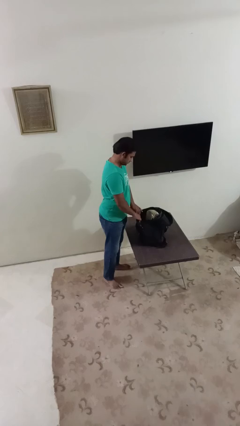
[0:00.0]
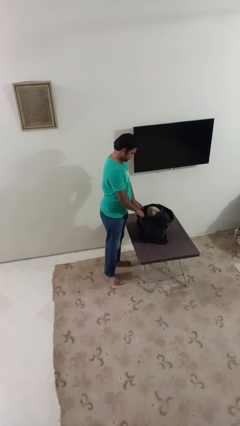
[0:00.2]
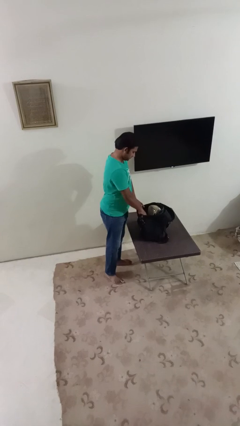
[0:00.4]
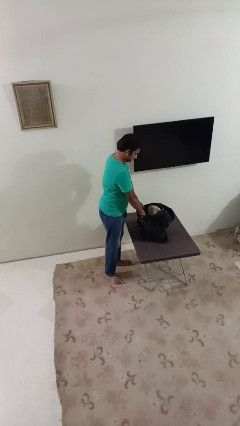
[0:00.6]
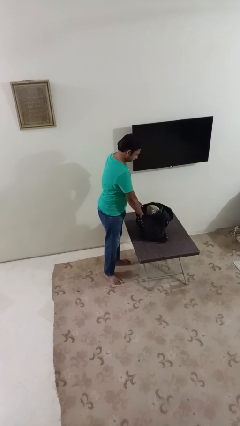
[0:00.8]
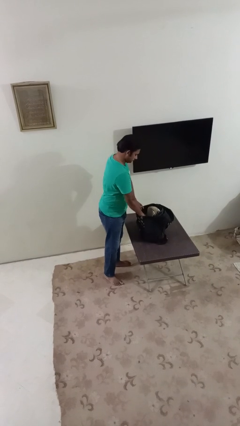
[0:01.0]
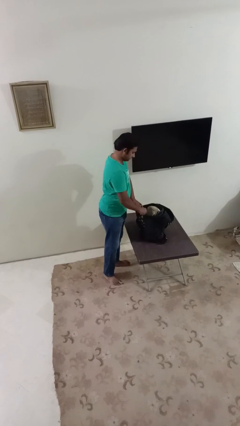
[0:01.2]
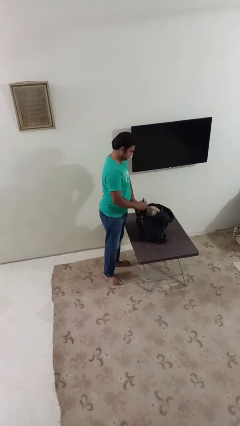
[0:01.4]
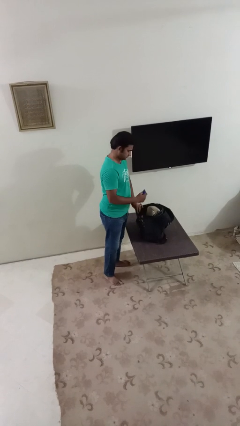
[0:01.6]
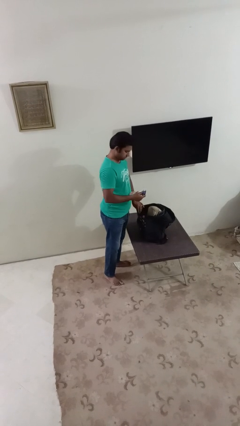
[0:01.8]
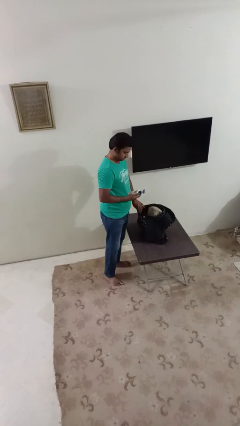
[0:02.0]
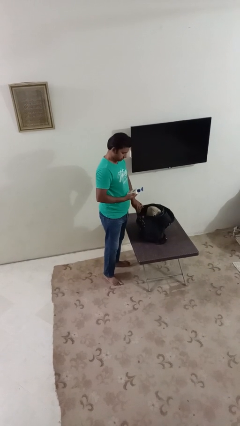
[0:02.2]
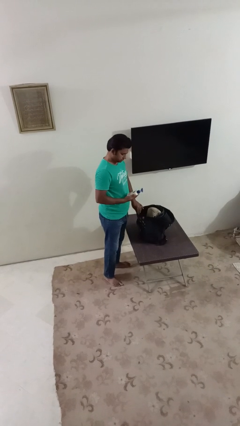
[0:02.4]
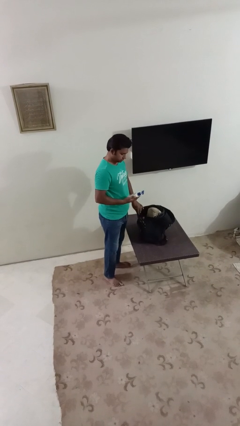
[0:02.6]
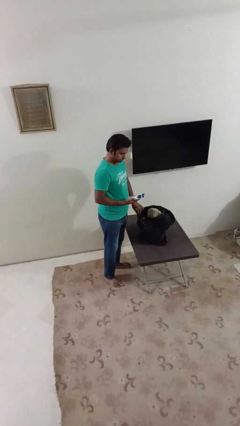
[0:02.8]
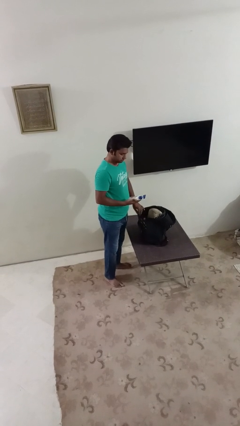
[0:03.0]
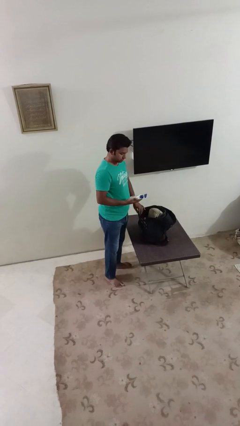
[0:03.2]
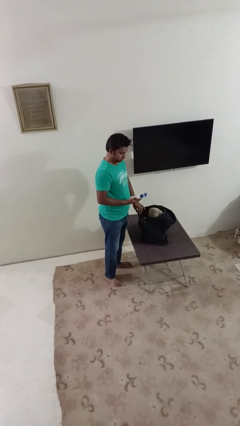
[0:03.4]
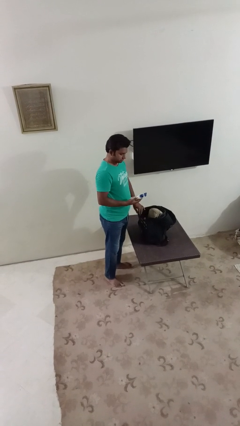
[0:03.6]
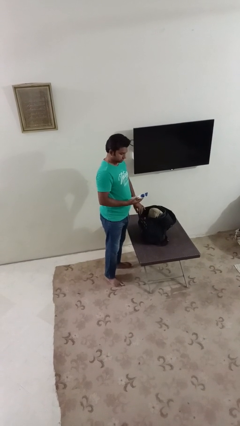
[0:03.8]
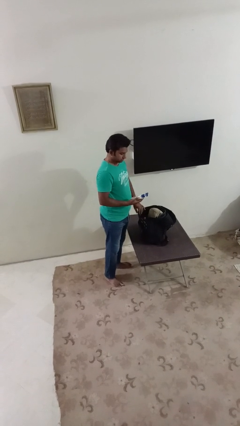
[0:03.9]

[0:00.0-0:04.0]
person takes object from backpack

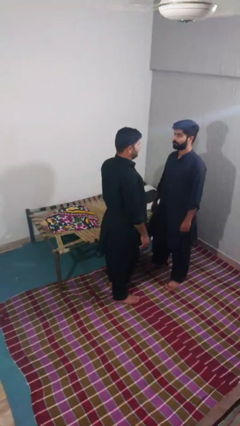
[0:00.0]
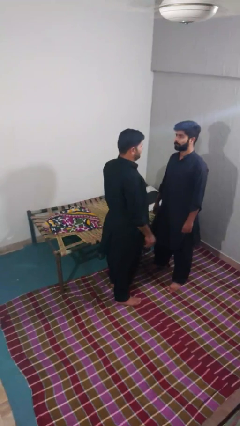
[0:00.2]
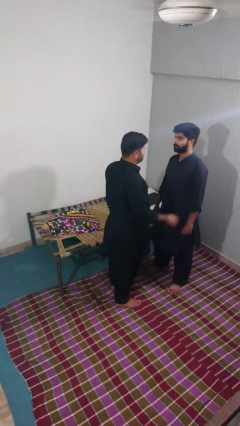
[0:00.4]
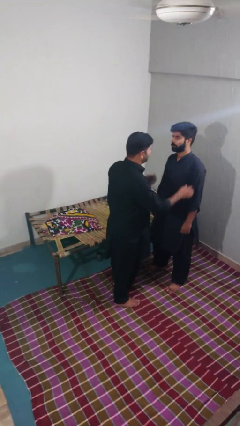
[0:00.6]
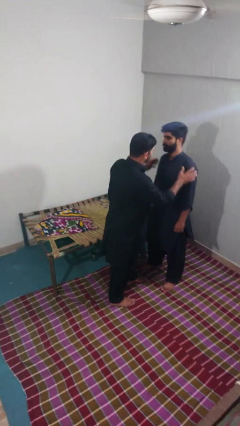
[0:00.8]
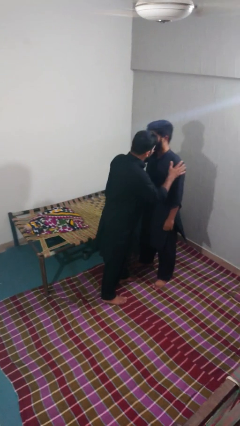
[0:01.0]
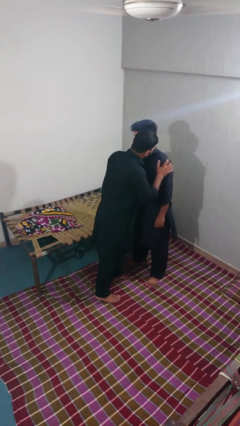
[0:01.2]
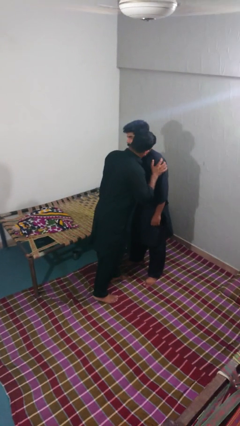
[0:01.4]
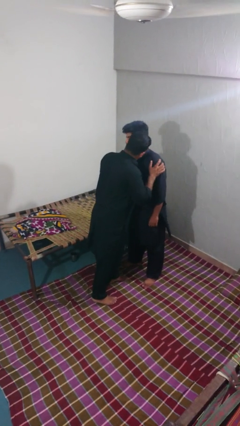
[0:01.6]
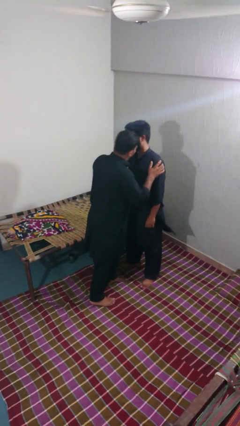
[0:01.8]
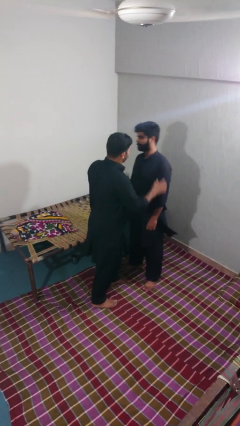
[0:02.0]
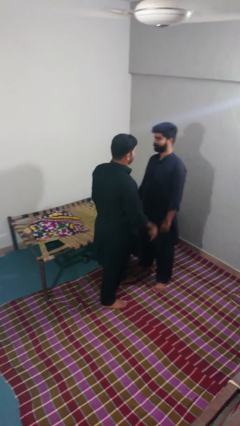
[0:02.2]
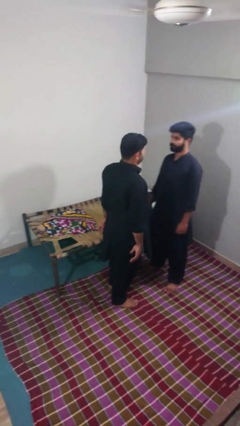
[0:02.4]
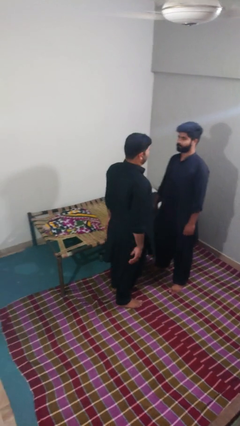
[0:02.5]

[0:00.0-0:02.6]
person kisses cheek of person

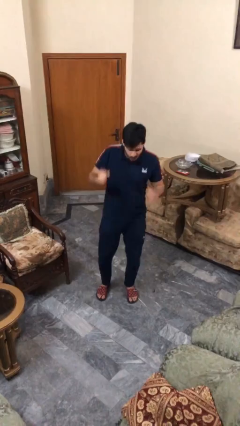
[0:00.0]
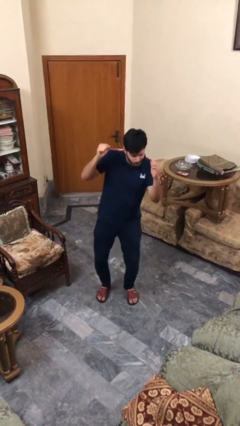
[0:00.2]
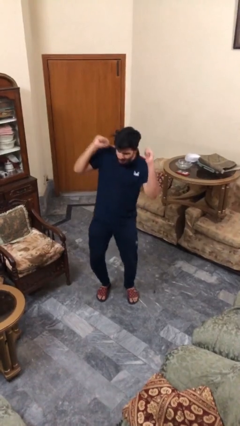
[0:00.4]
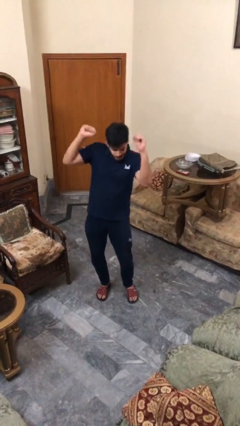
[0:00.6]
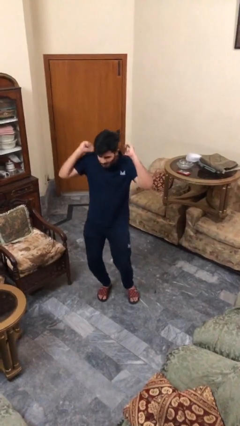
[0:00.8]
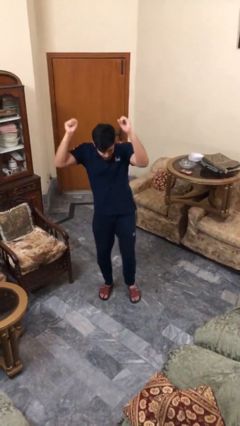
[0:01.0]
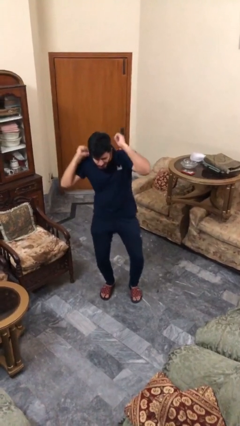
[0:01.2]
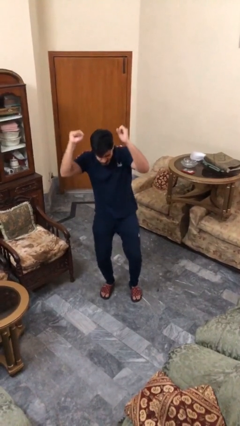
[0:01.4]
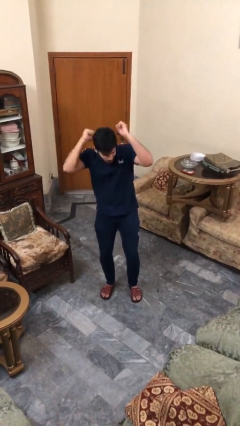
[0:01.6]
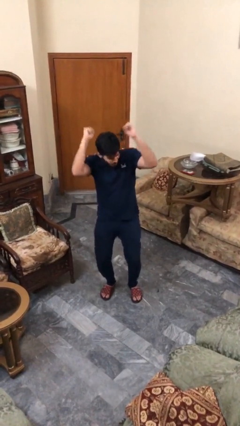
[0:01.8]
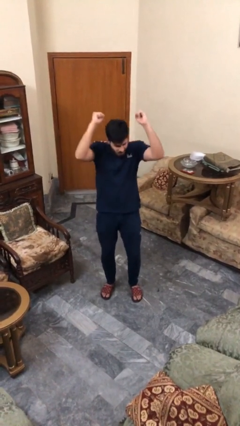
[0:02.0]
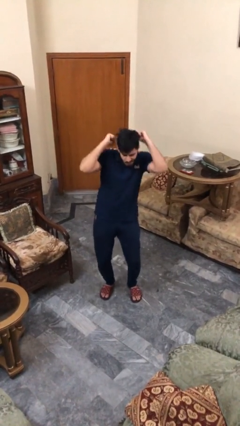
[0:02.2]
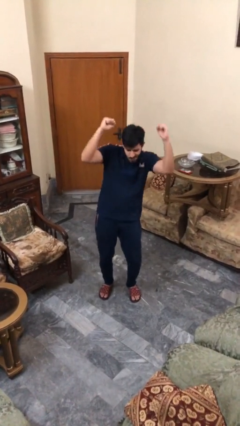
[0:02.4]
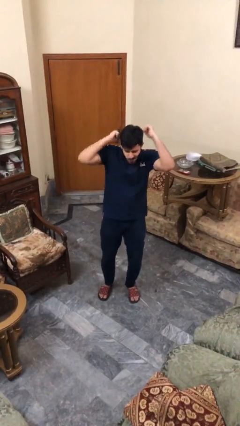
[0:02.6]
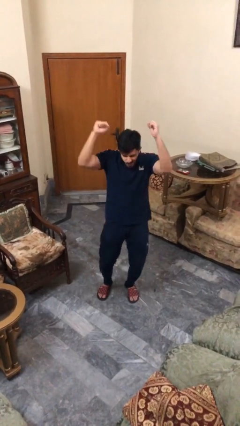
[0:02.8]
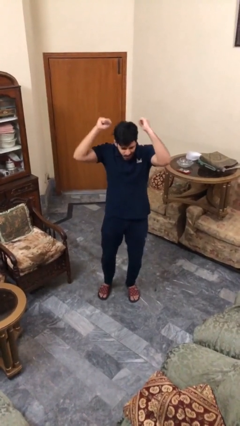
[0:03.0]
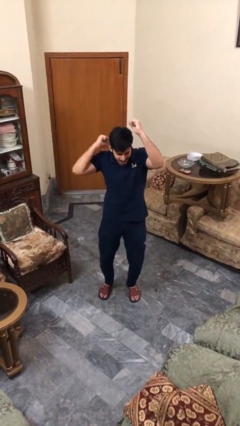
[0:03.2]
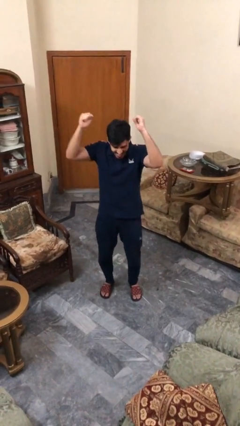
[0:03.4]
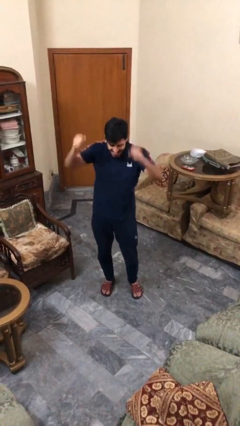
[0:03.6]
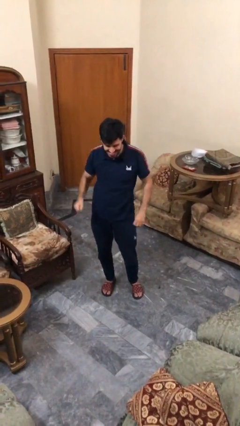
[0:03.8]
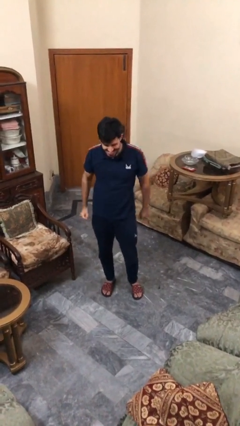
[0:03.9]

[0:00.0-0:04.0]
person dances in place

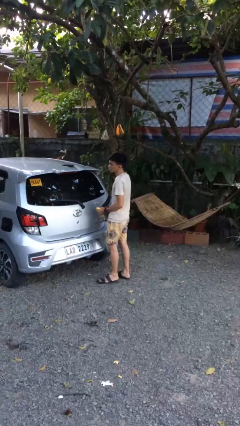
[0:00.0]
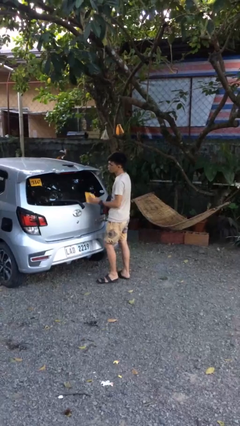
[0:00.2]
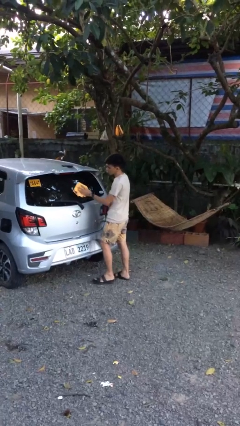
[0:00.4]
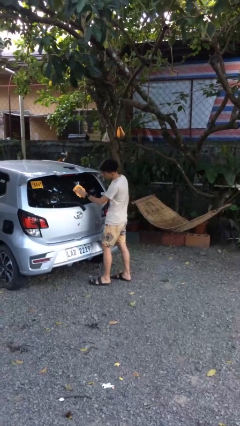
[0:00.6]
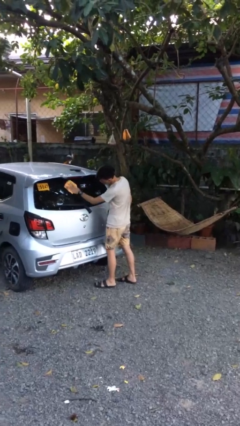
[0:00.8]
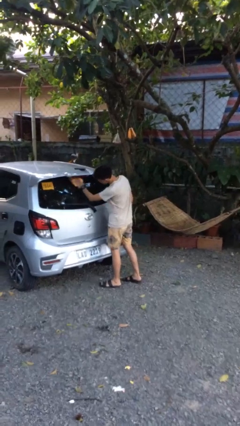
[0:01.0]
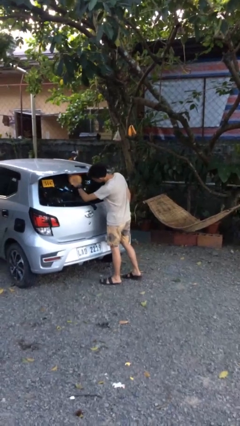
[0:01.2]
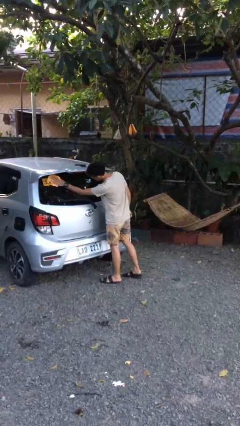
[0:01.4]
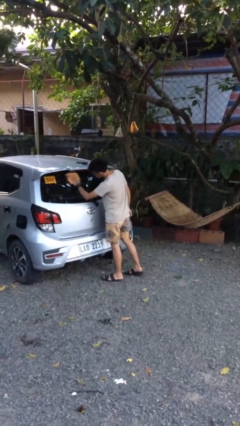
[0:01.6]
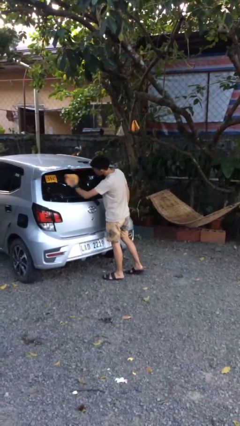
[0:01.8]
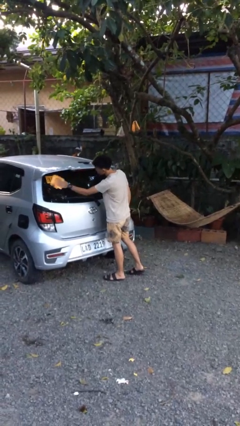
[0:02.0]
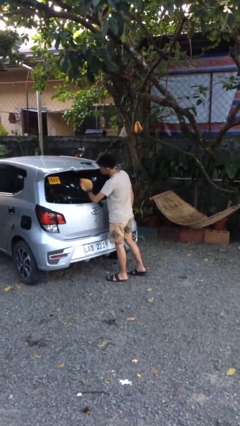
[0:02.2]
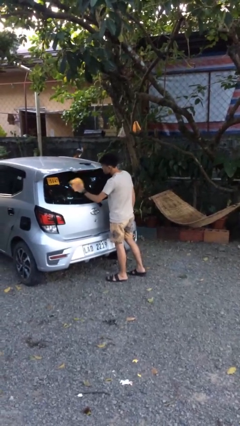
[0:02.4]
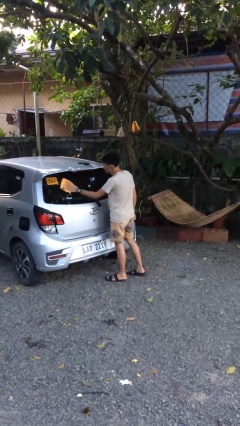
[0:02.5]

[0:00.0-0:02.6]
person polishes car with rag

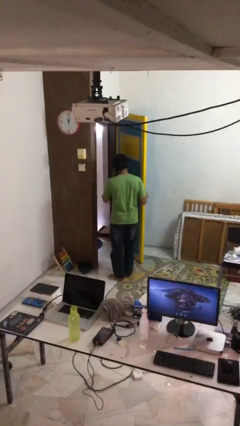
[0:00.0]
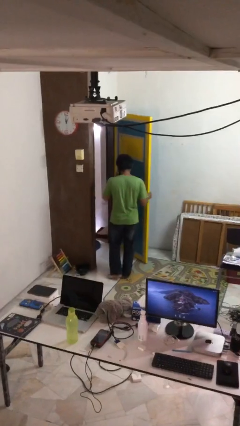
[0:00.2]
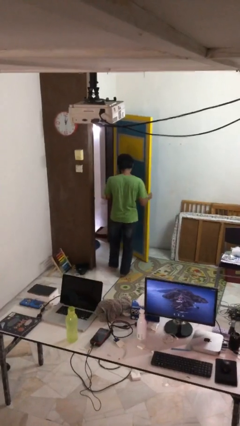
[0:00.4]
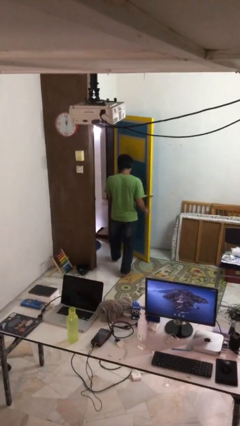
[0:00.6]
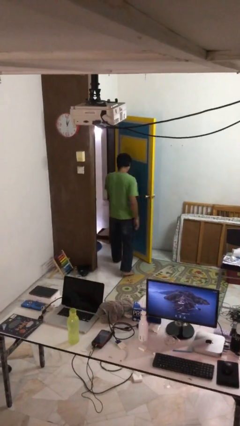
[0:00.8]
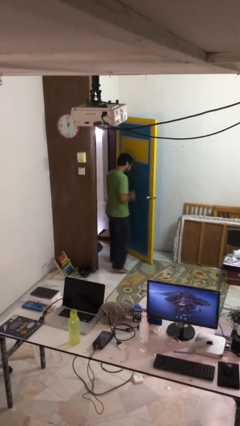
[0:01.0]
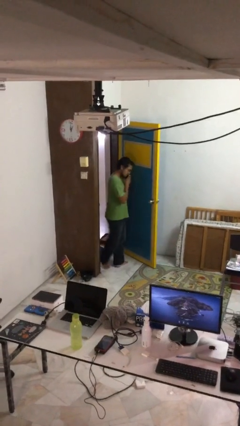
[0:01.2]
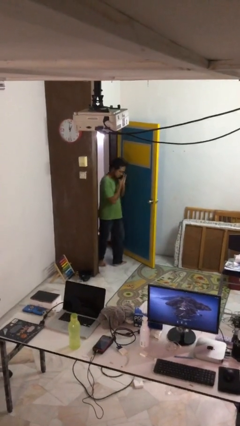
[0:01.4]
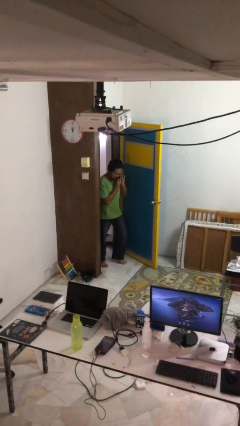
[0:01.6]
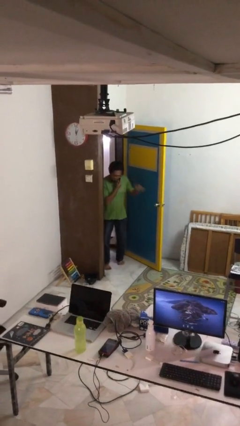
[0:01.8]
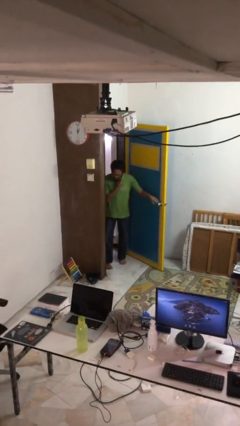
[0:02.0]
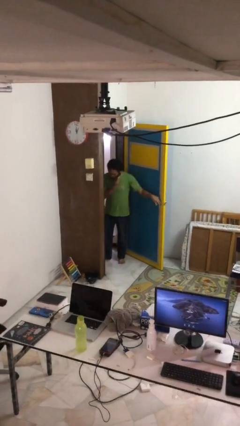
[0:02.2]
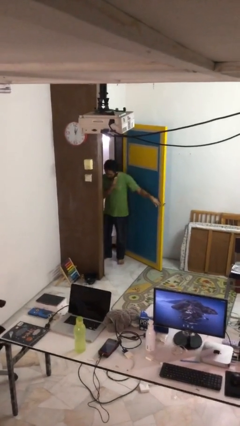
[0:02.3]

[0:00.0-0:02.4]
person exits scene through structure

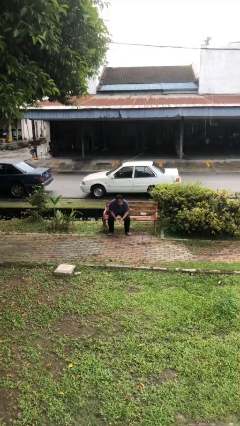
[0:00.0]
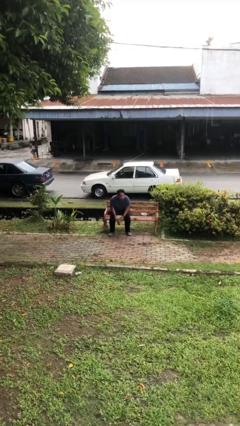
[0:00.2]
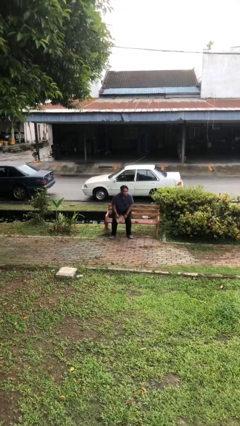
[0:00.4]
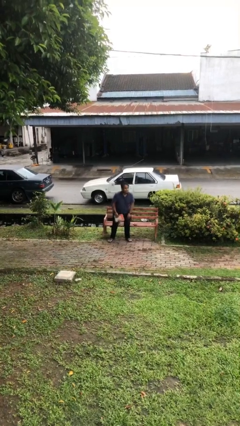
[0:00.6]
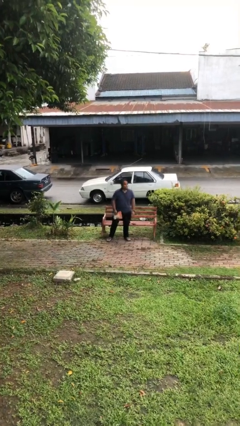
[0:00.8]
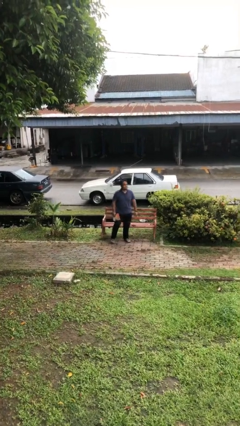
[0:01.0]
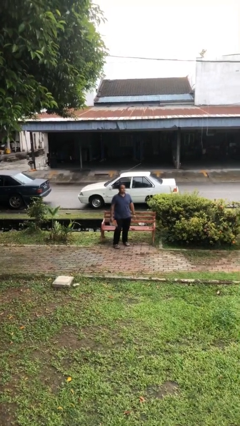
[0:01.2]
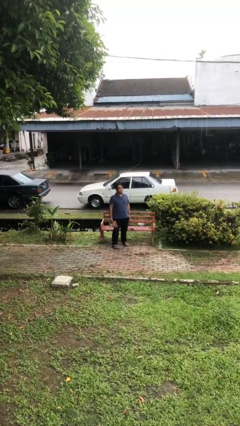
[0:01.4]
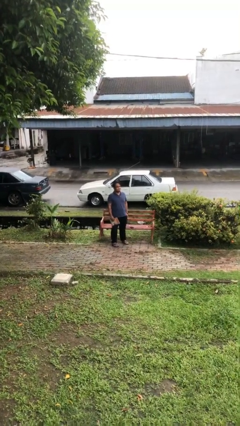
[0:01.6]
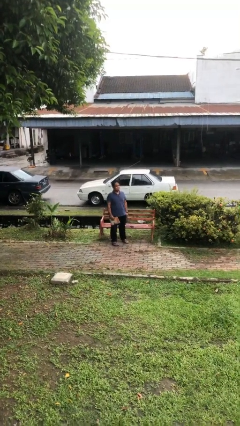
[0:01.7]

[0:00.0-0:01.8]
person stands up
